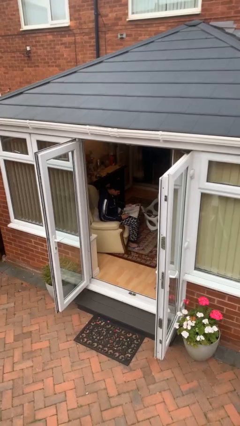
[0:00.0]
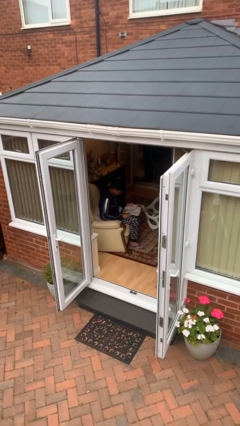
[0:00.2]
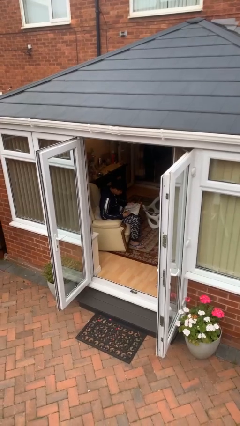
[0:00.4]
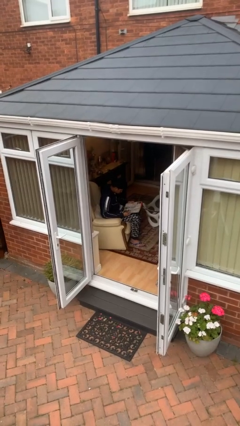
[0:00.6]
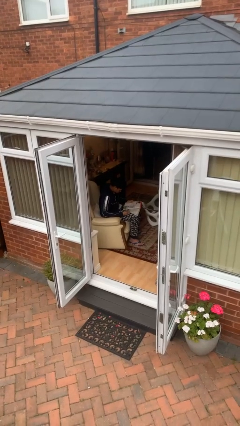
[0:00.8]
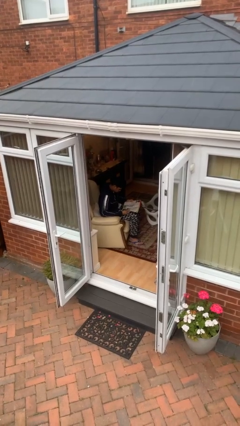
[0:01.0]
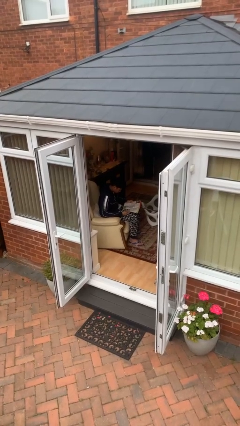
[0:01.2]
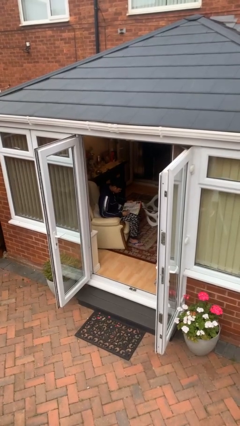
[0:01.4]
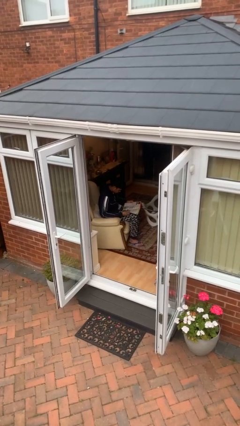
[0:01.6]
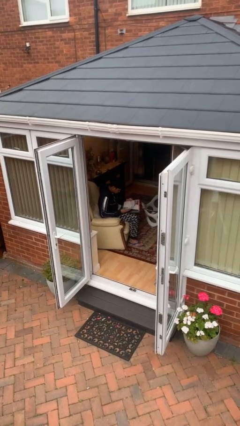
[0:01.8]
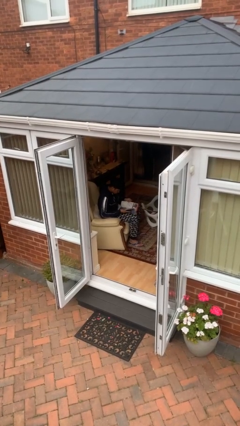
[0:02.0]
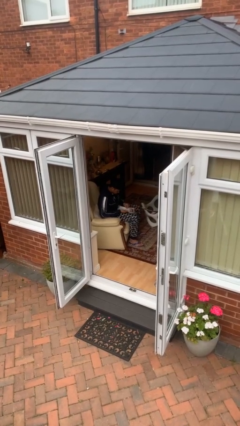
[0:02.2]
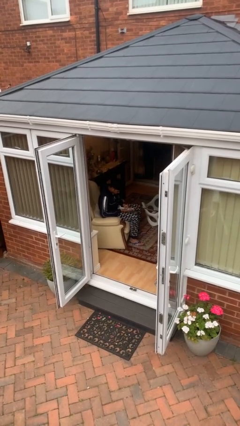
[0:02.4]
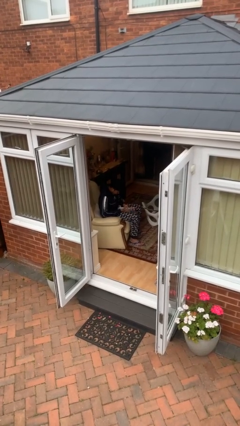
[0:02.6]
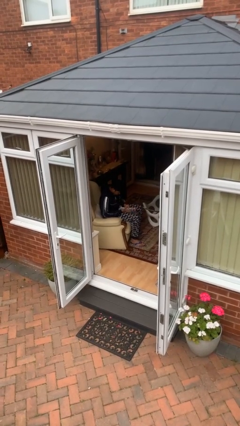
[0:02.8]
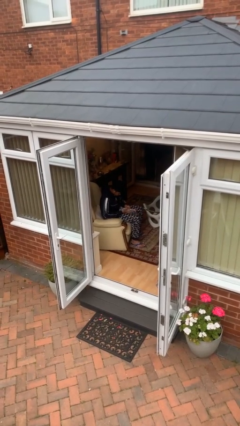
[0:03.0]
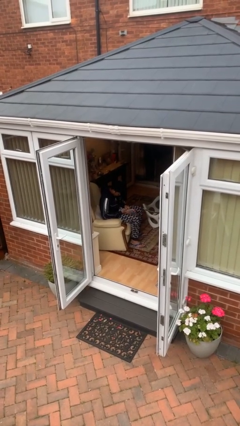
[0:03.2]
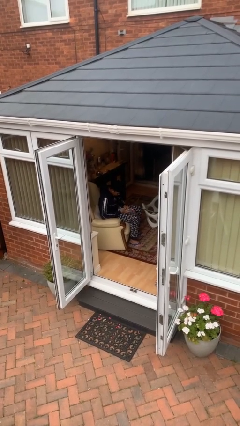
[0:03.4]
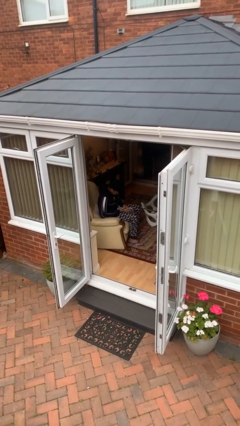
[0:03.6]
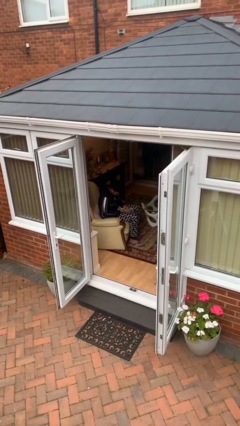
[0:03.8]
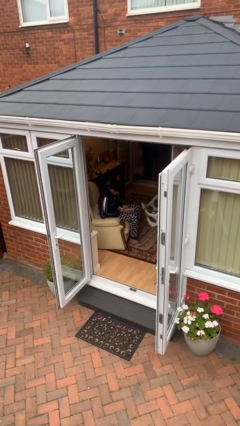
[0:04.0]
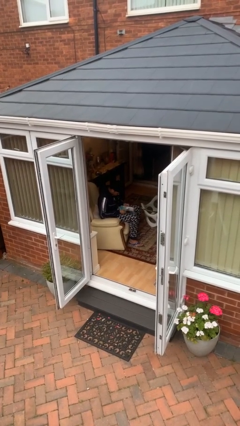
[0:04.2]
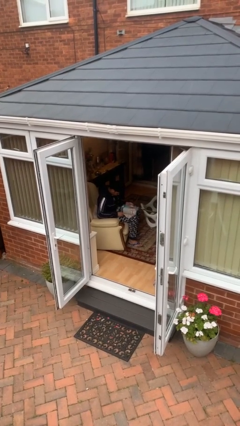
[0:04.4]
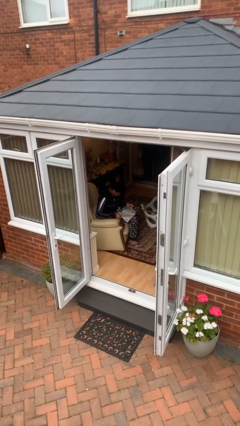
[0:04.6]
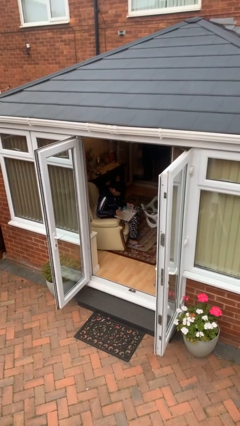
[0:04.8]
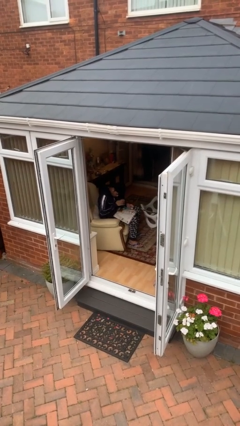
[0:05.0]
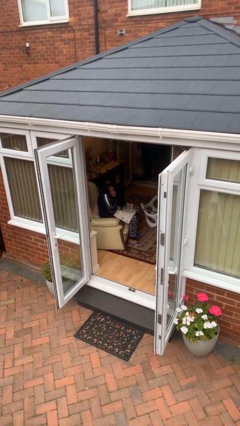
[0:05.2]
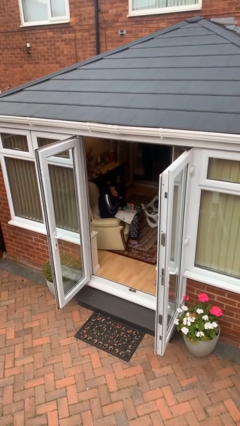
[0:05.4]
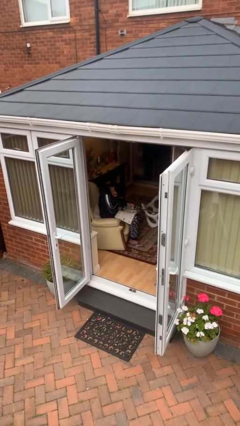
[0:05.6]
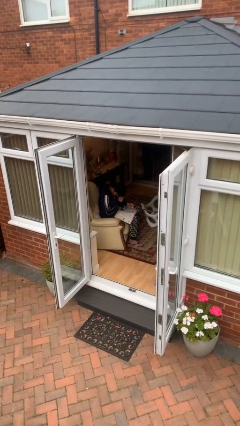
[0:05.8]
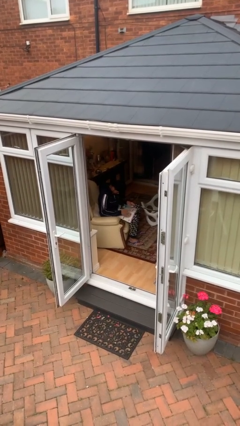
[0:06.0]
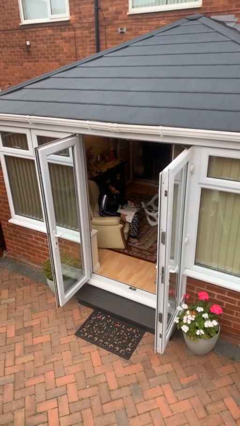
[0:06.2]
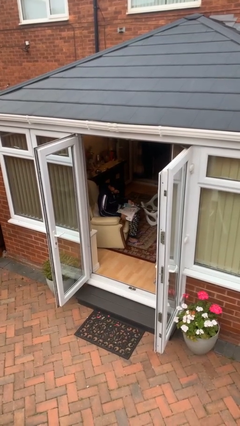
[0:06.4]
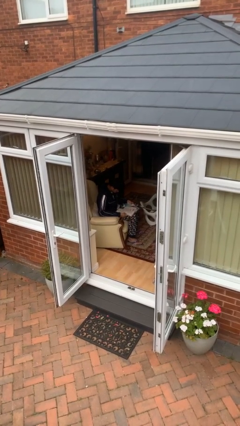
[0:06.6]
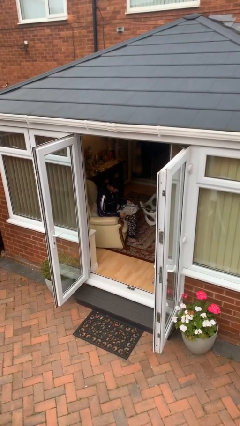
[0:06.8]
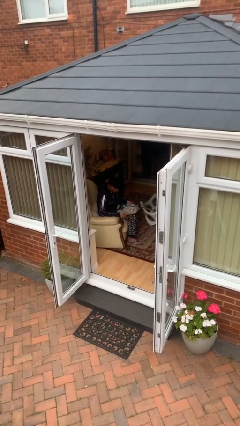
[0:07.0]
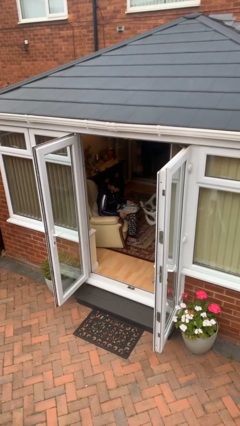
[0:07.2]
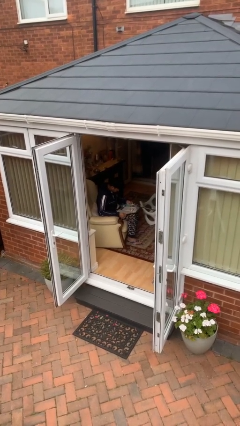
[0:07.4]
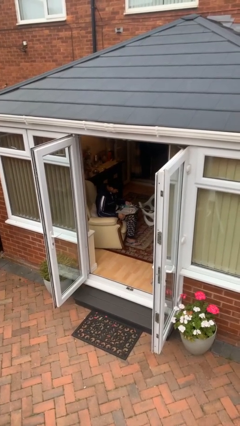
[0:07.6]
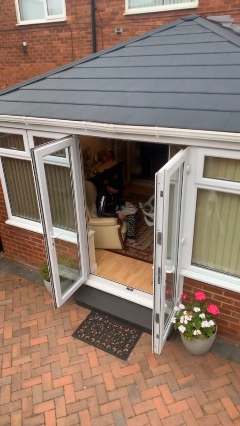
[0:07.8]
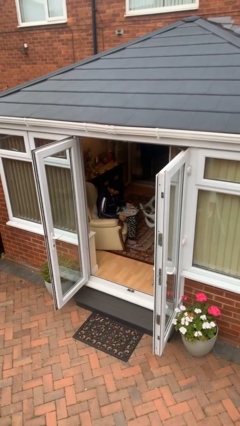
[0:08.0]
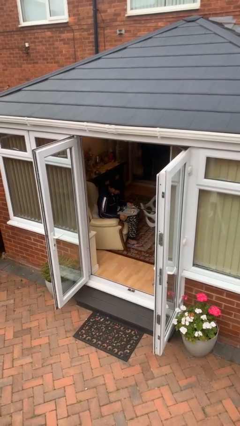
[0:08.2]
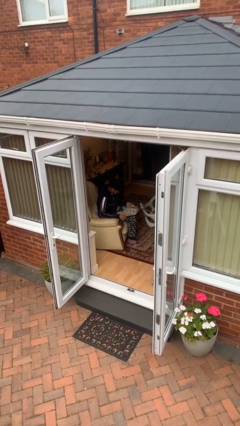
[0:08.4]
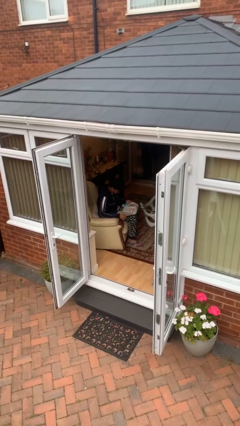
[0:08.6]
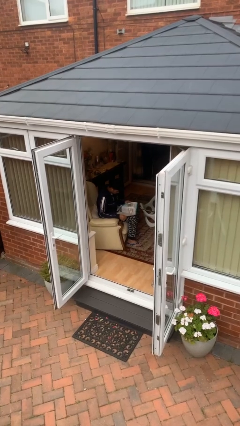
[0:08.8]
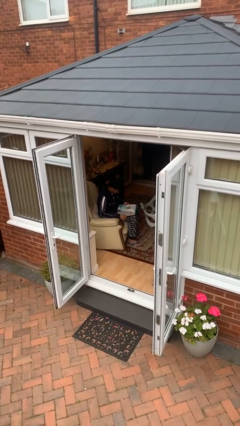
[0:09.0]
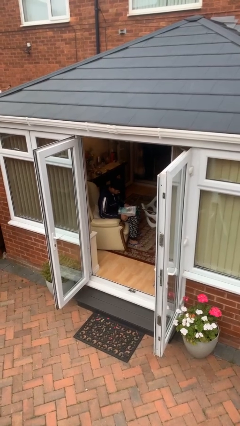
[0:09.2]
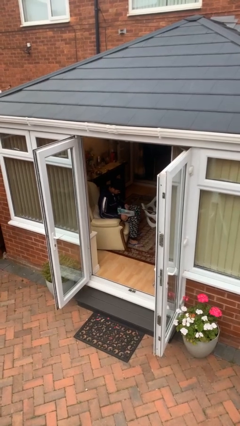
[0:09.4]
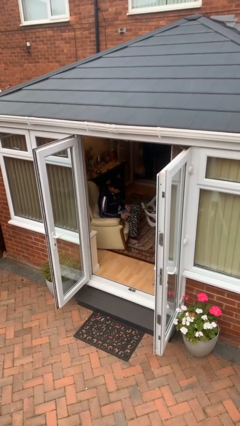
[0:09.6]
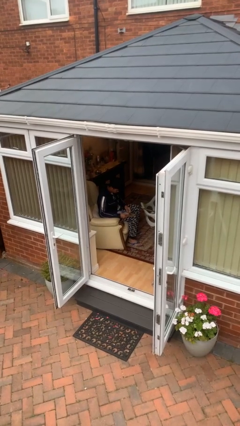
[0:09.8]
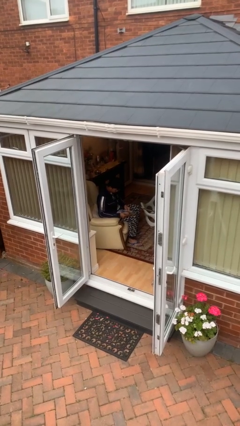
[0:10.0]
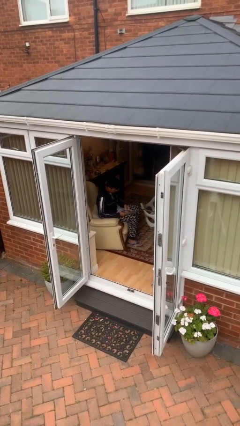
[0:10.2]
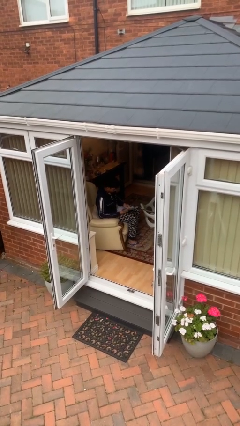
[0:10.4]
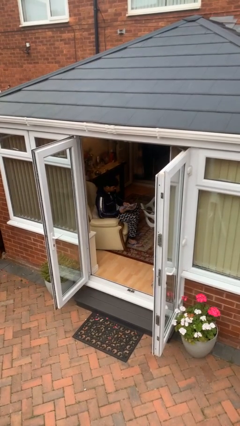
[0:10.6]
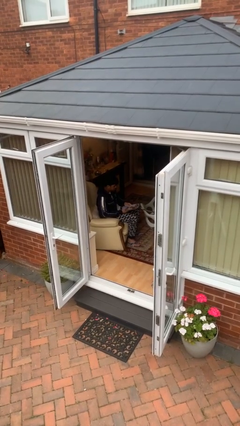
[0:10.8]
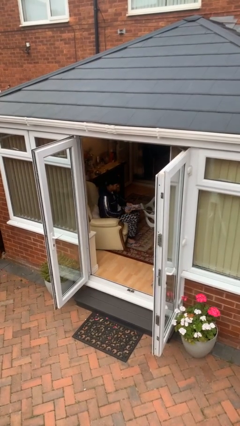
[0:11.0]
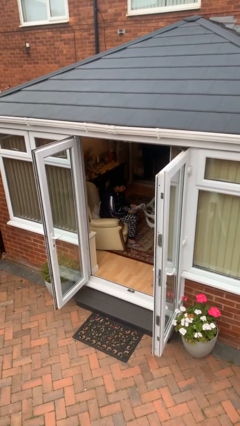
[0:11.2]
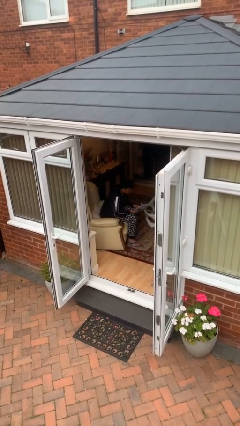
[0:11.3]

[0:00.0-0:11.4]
person reads document

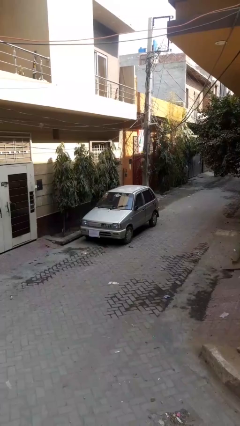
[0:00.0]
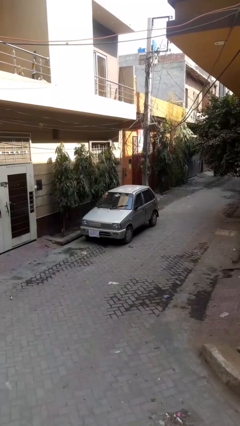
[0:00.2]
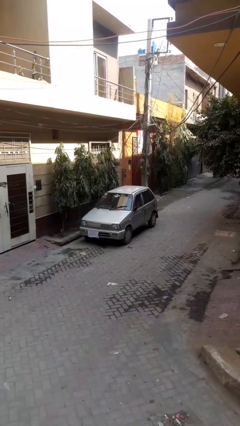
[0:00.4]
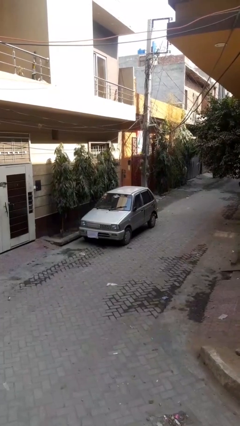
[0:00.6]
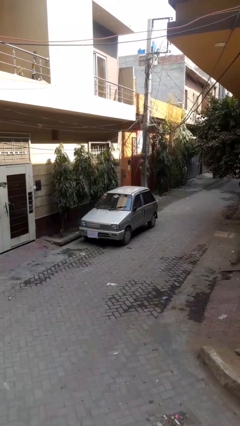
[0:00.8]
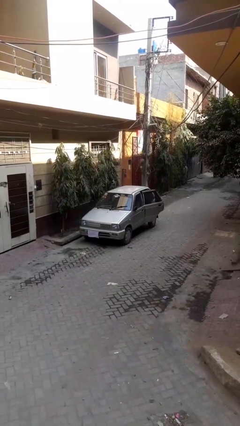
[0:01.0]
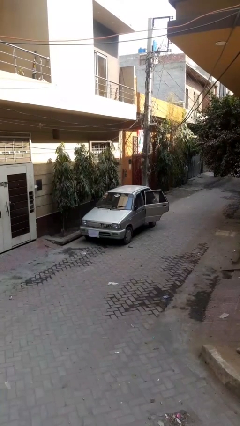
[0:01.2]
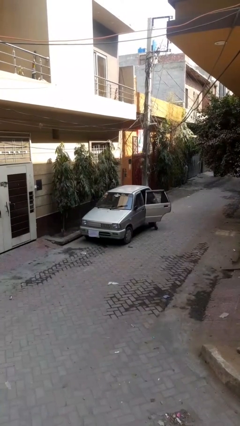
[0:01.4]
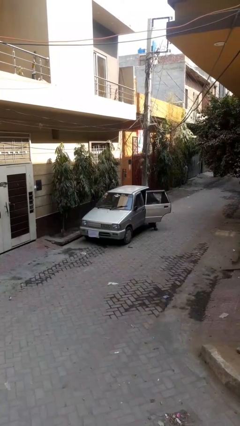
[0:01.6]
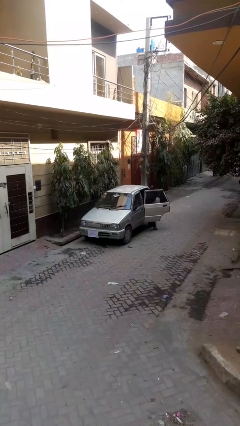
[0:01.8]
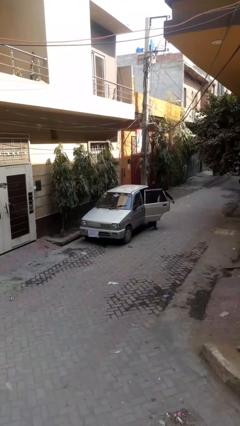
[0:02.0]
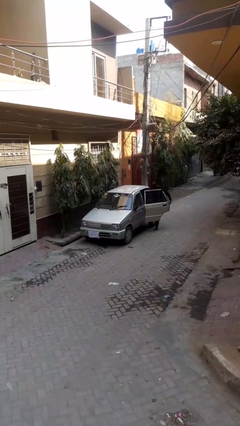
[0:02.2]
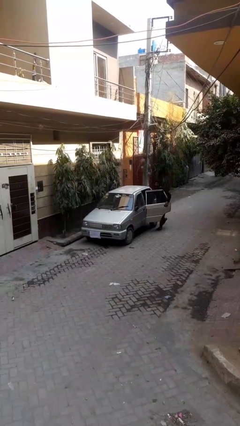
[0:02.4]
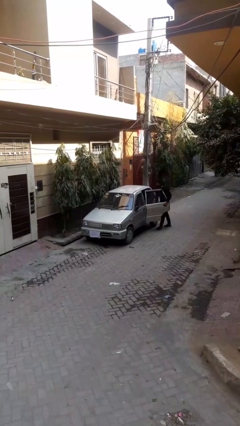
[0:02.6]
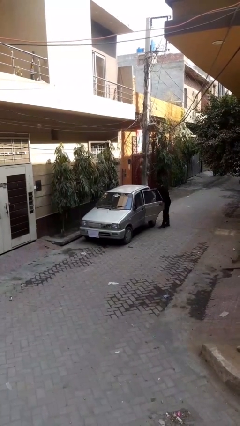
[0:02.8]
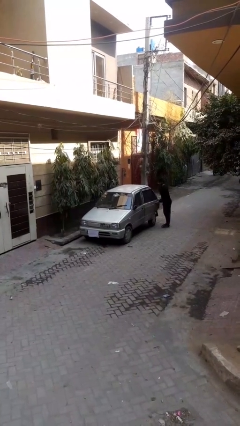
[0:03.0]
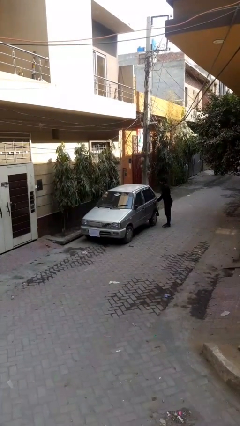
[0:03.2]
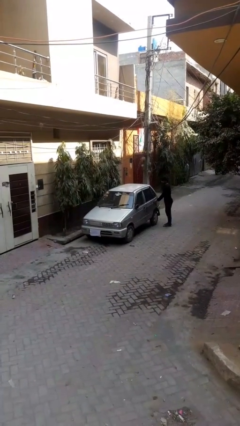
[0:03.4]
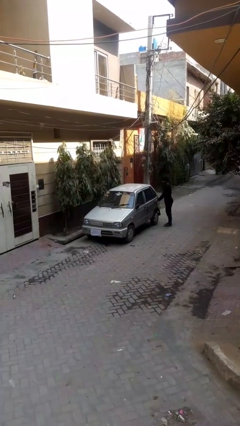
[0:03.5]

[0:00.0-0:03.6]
car drops off person

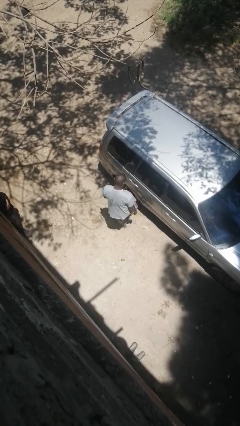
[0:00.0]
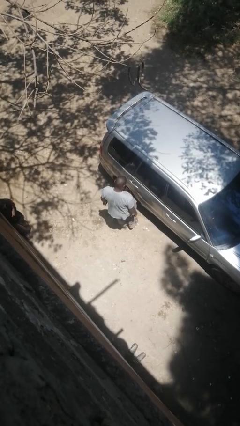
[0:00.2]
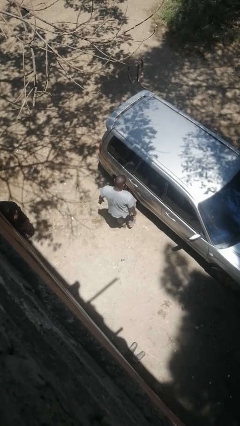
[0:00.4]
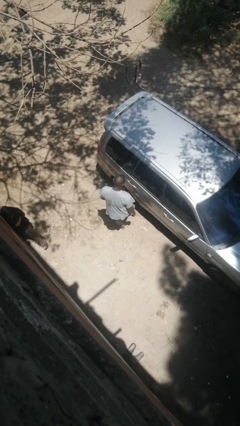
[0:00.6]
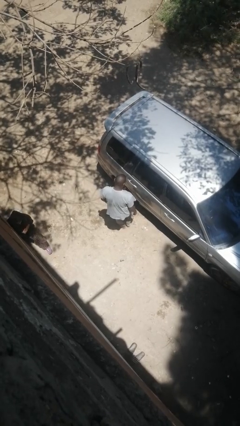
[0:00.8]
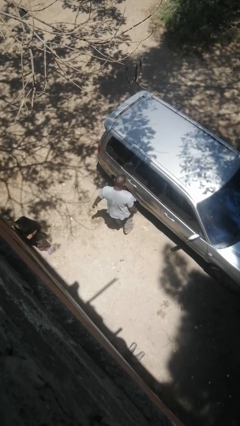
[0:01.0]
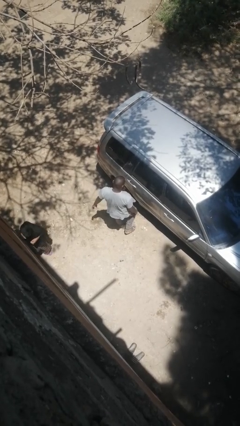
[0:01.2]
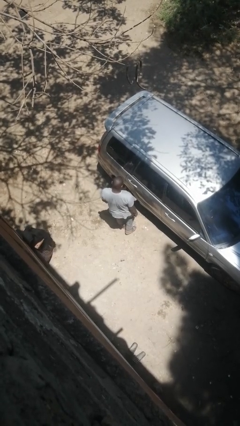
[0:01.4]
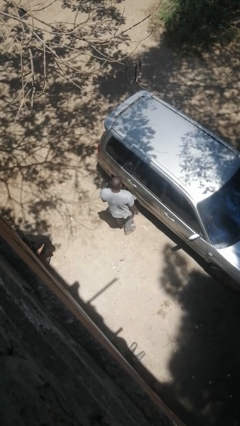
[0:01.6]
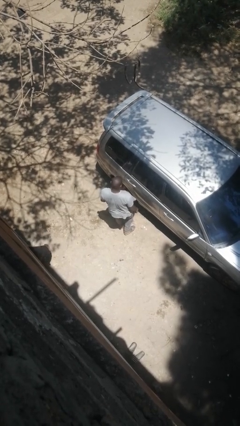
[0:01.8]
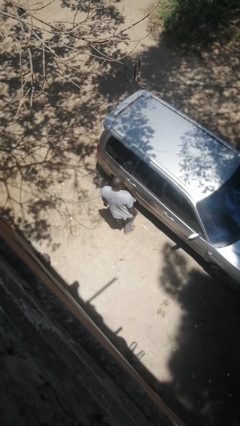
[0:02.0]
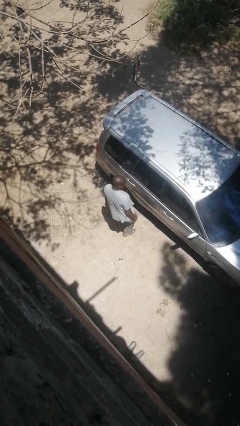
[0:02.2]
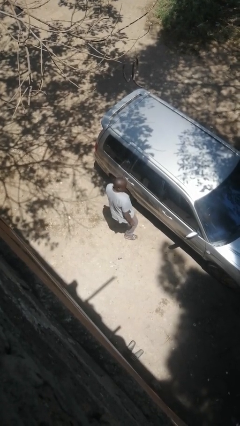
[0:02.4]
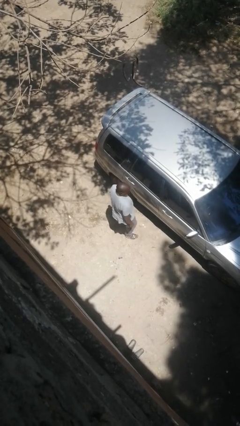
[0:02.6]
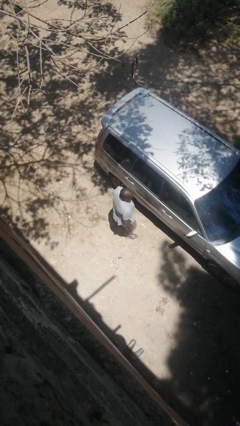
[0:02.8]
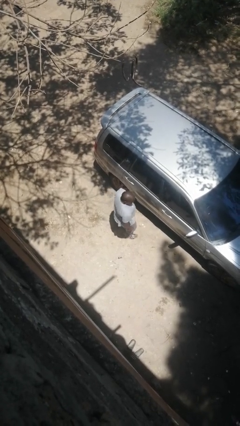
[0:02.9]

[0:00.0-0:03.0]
person kicks car tires
